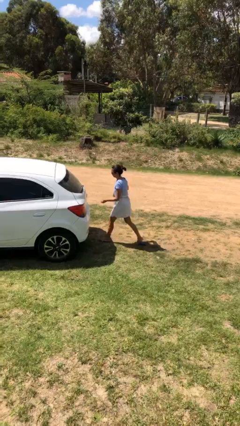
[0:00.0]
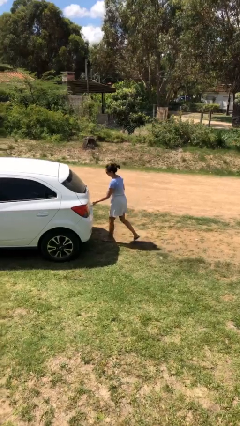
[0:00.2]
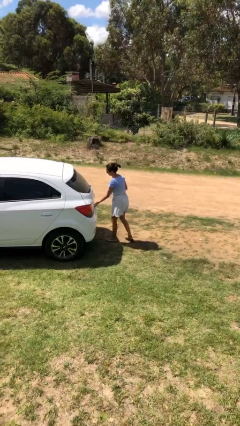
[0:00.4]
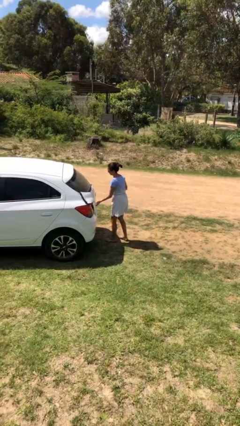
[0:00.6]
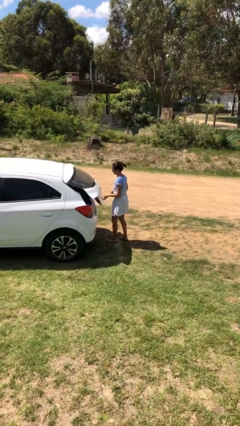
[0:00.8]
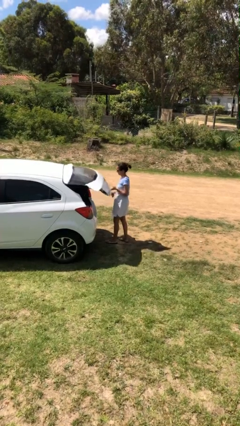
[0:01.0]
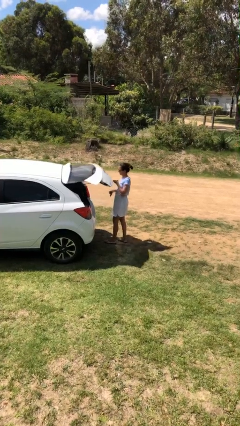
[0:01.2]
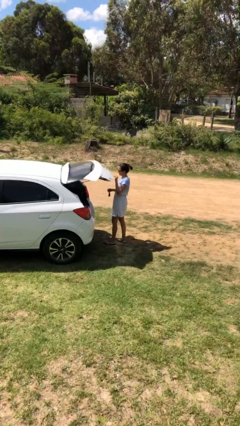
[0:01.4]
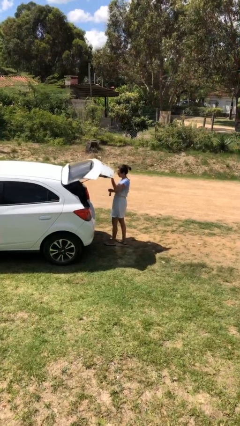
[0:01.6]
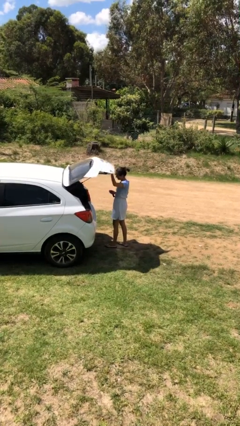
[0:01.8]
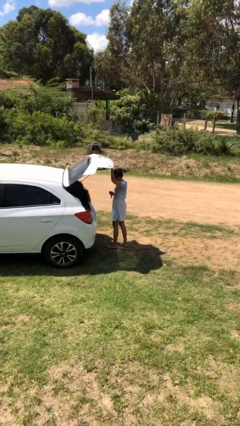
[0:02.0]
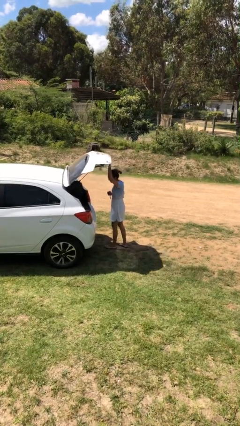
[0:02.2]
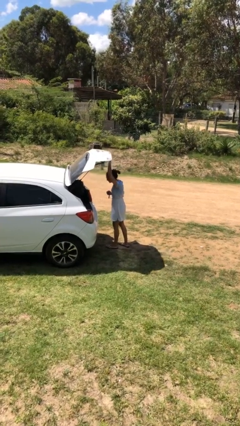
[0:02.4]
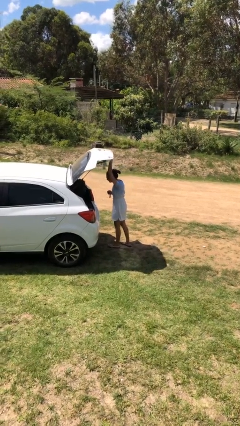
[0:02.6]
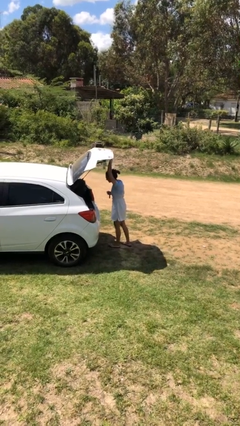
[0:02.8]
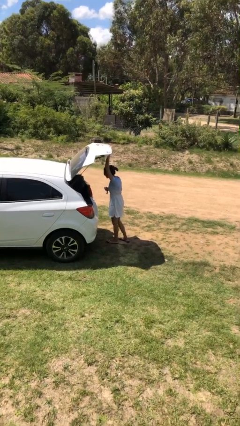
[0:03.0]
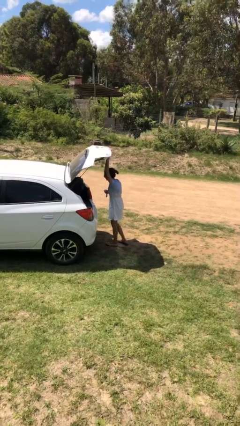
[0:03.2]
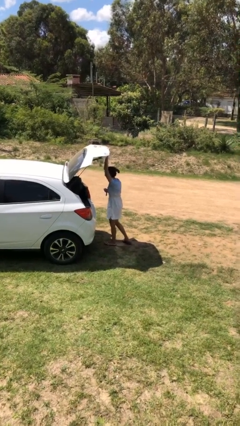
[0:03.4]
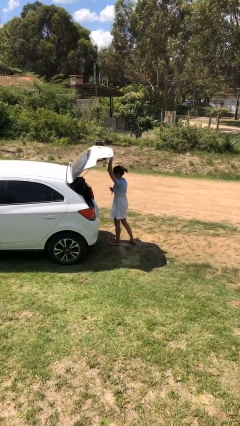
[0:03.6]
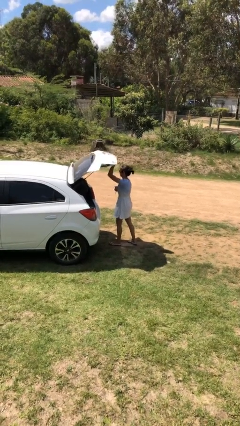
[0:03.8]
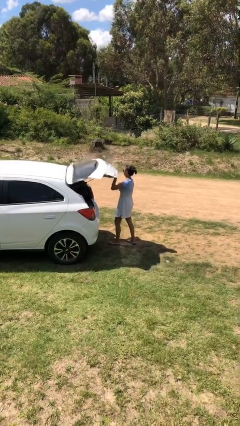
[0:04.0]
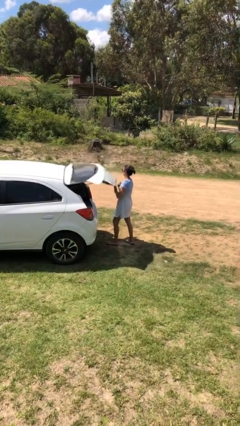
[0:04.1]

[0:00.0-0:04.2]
person opens car trunk

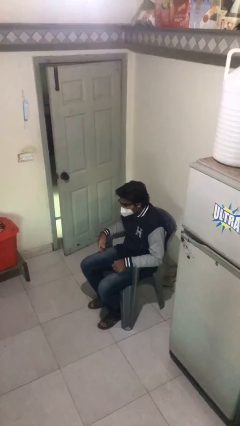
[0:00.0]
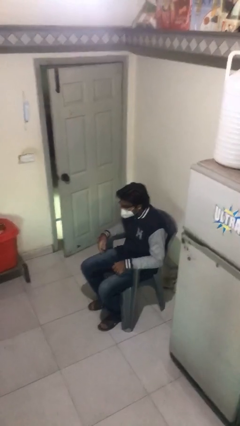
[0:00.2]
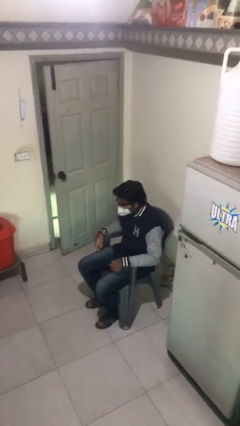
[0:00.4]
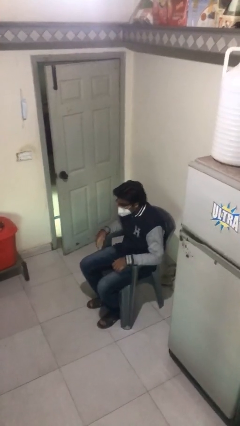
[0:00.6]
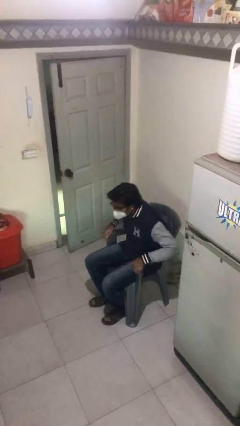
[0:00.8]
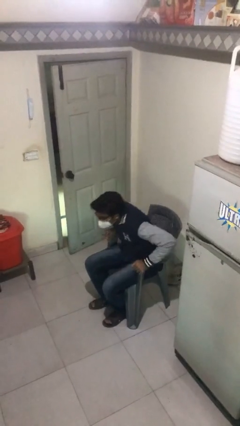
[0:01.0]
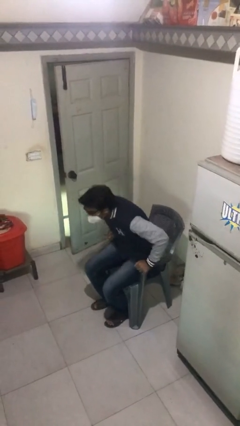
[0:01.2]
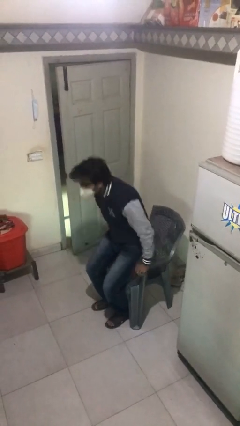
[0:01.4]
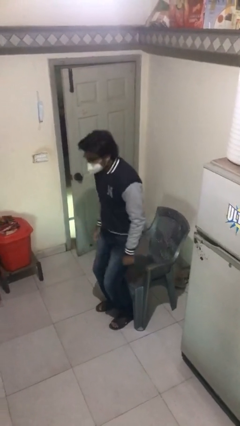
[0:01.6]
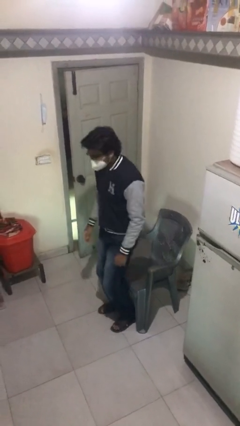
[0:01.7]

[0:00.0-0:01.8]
person stands up

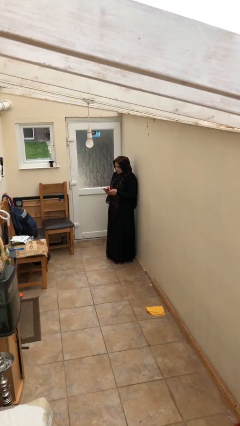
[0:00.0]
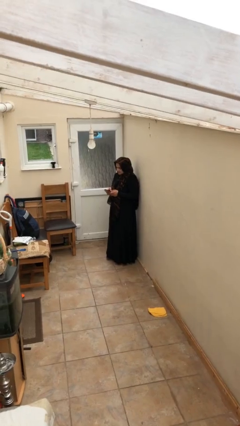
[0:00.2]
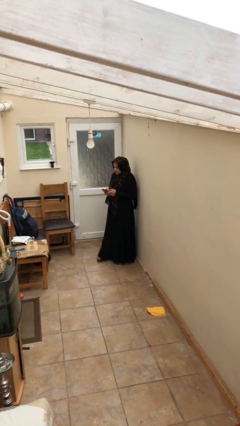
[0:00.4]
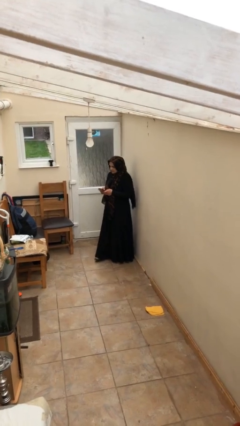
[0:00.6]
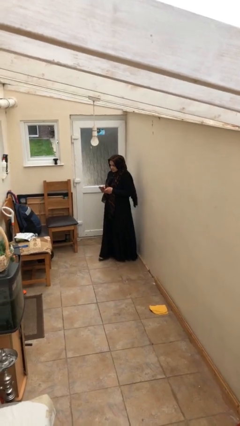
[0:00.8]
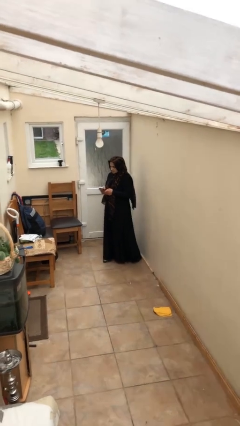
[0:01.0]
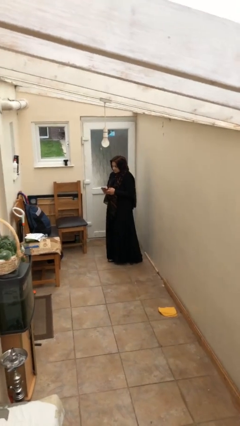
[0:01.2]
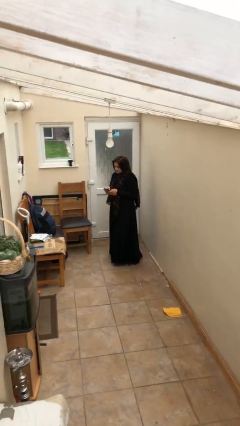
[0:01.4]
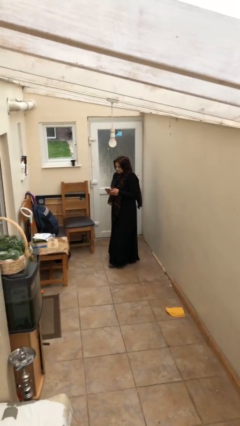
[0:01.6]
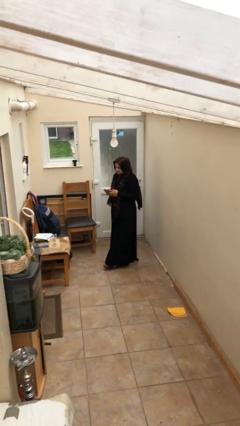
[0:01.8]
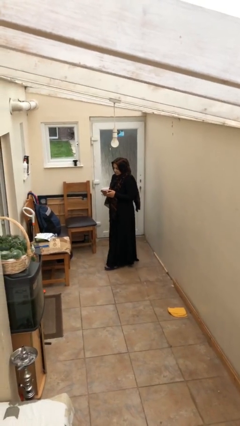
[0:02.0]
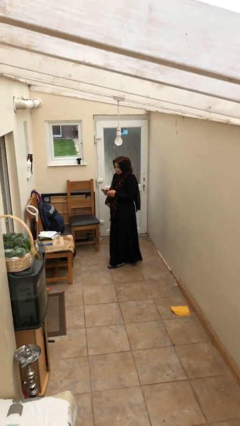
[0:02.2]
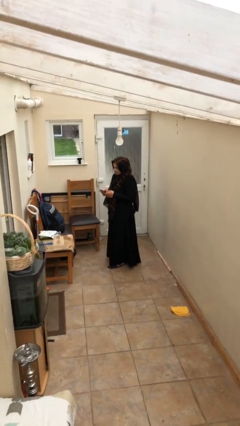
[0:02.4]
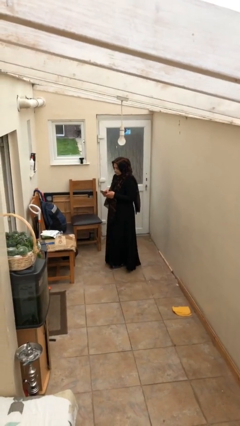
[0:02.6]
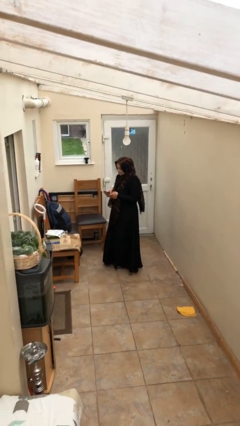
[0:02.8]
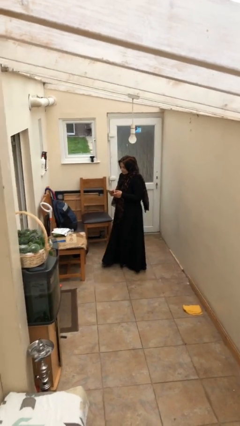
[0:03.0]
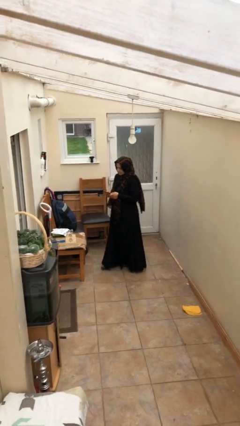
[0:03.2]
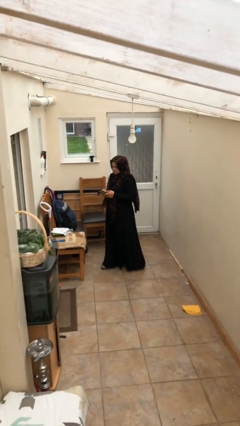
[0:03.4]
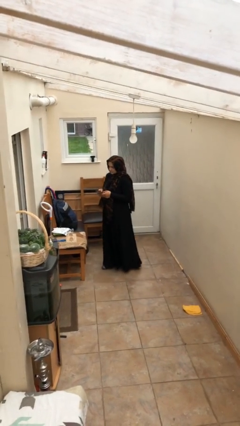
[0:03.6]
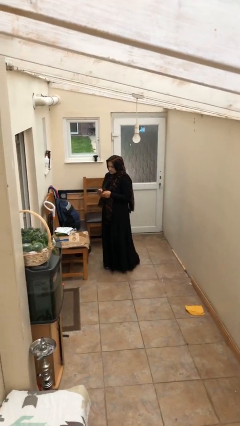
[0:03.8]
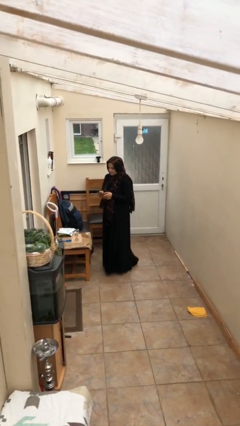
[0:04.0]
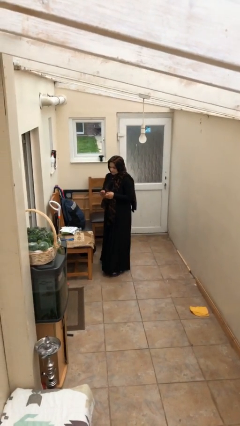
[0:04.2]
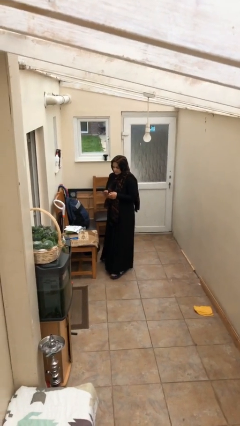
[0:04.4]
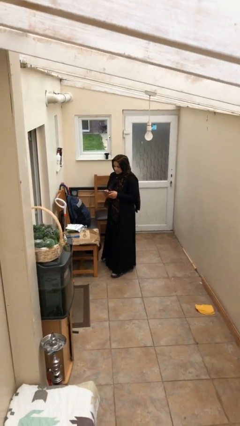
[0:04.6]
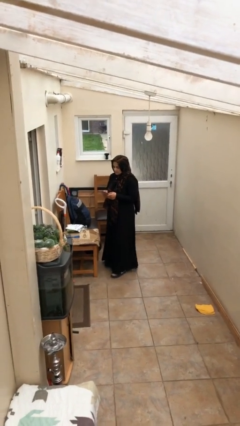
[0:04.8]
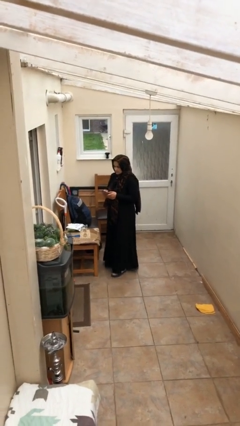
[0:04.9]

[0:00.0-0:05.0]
person texts on phone

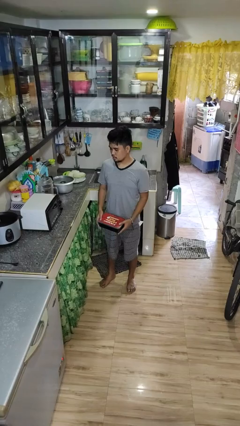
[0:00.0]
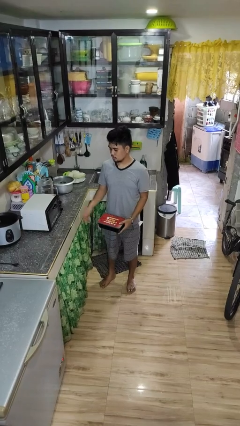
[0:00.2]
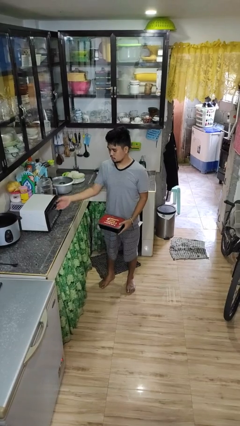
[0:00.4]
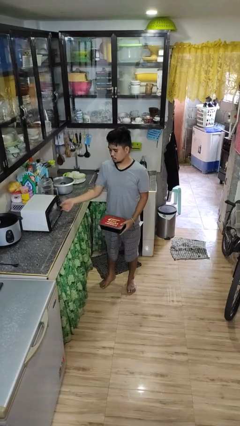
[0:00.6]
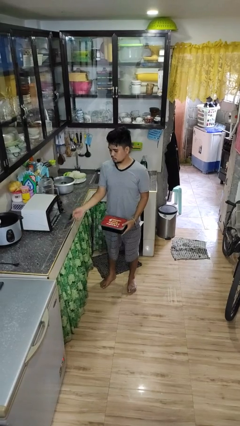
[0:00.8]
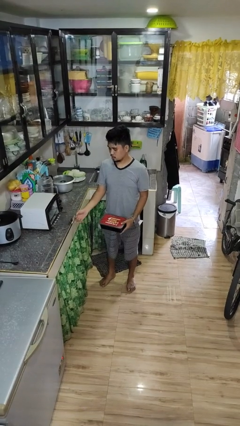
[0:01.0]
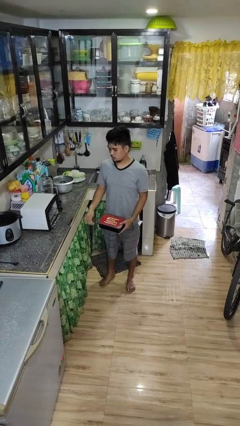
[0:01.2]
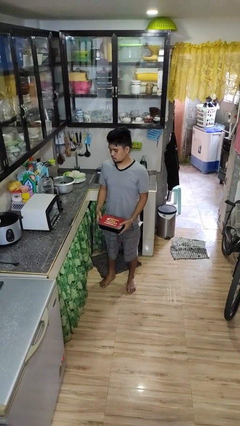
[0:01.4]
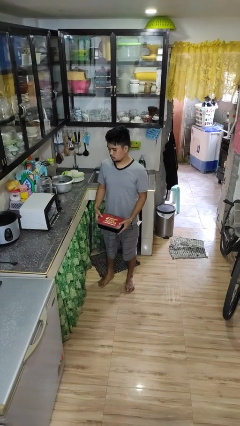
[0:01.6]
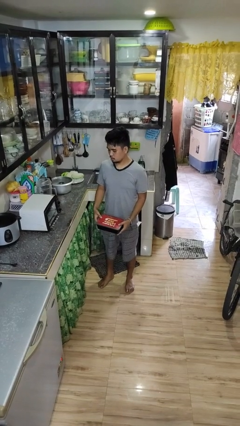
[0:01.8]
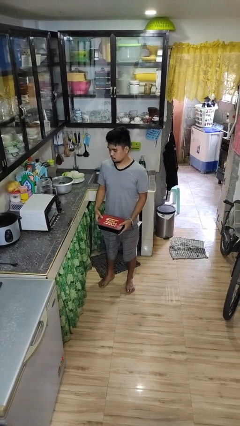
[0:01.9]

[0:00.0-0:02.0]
person opens microwave

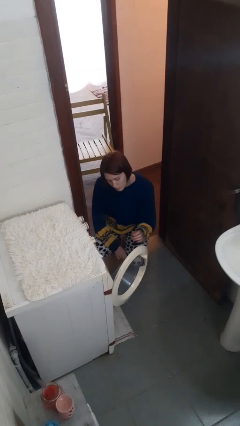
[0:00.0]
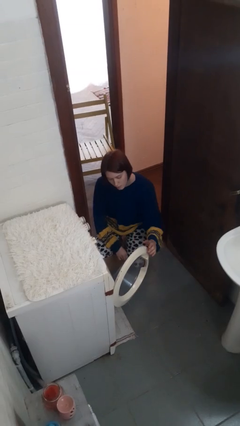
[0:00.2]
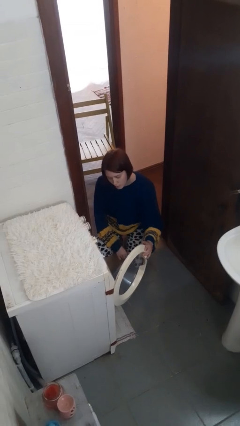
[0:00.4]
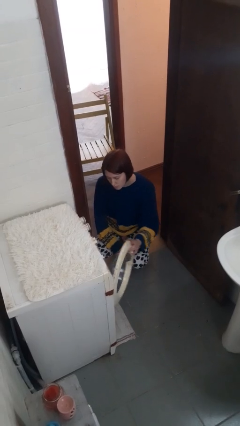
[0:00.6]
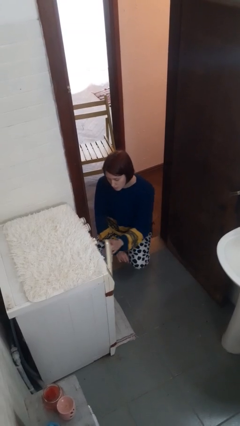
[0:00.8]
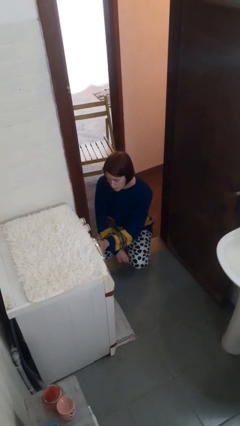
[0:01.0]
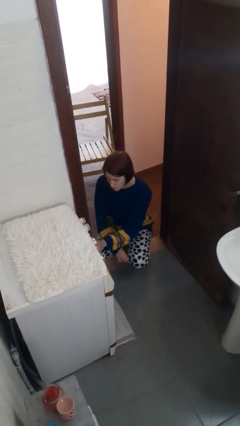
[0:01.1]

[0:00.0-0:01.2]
person closes clothes washer

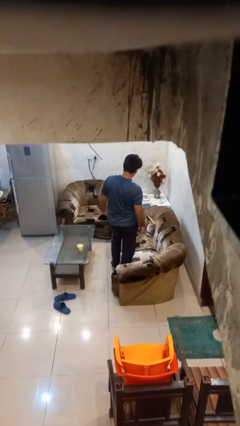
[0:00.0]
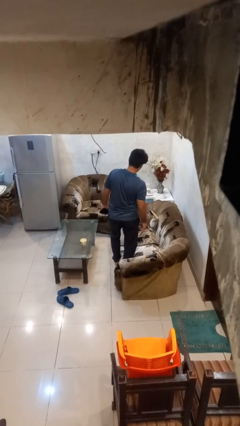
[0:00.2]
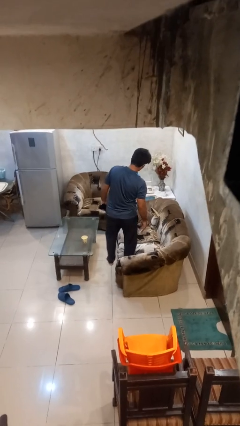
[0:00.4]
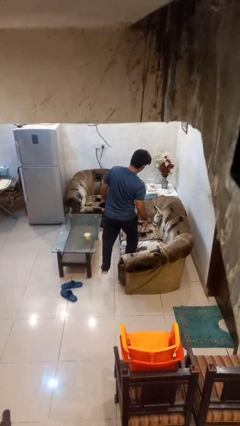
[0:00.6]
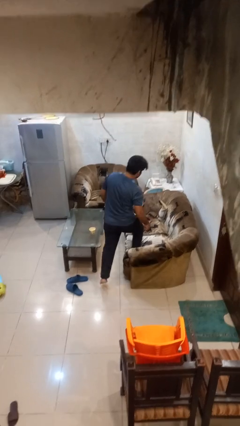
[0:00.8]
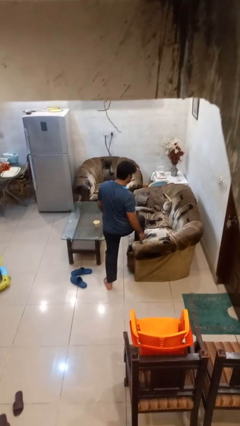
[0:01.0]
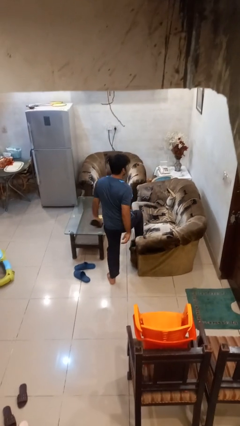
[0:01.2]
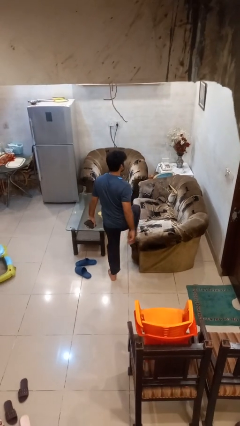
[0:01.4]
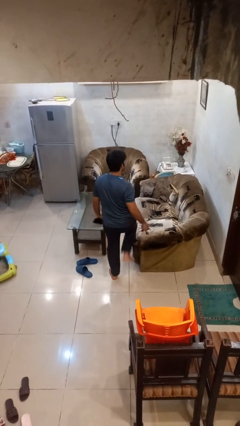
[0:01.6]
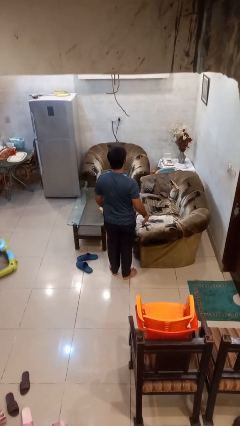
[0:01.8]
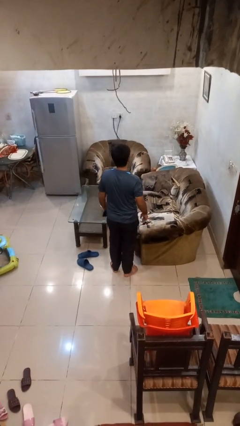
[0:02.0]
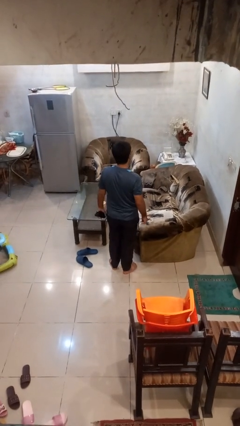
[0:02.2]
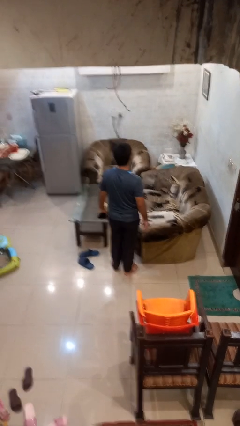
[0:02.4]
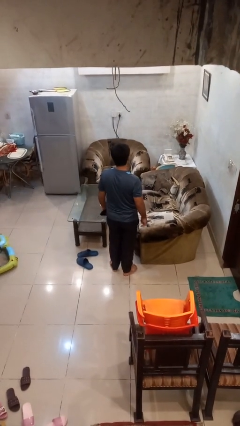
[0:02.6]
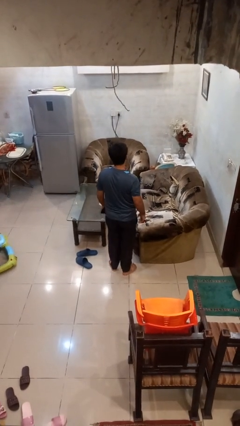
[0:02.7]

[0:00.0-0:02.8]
person climbs off couch

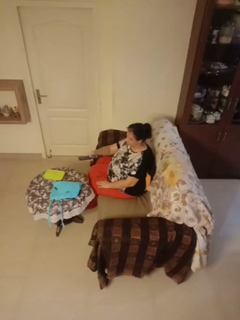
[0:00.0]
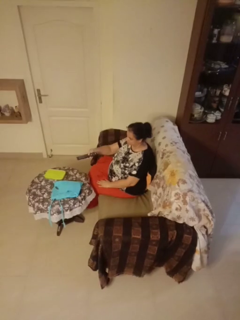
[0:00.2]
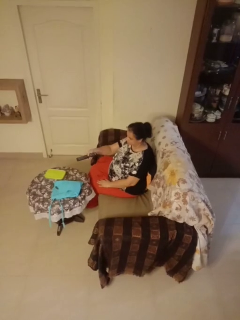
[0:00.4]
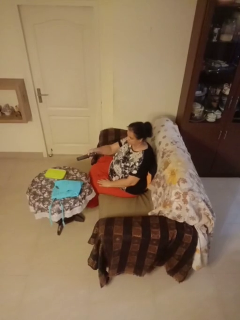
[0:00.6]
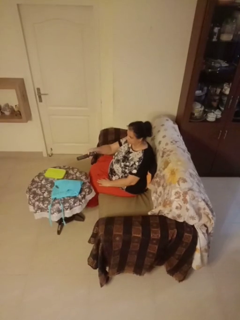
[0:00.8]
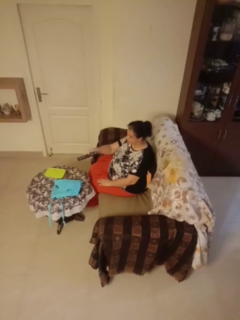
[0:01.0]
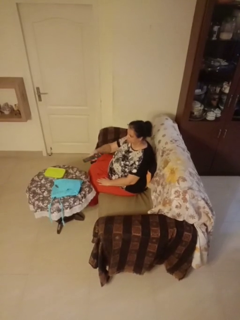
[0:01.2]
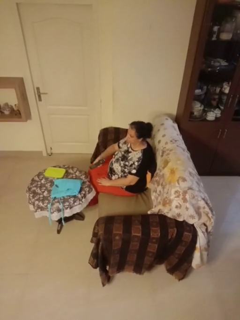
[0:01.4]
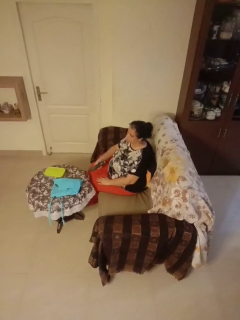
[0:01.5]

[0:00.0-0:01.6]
person uses television remote
